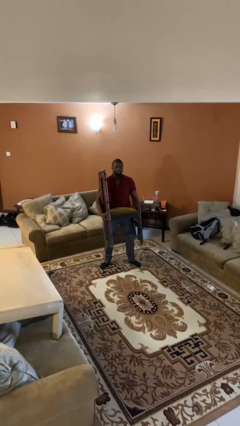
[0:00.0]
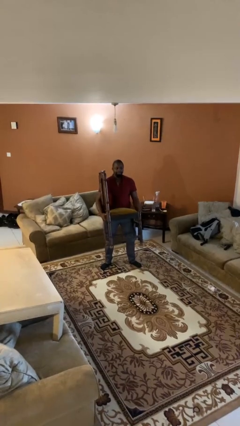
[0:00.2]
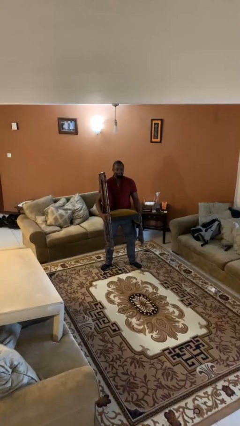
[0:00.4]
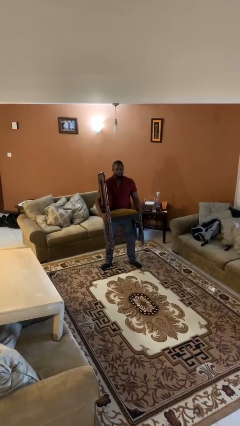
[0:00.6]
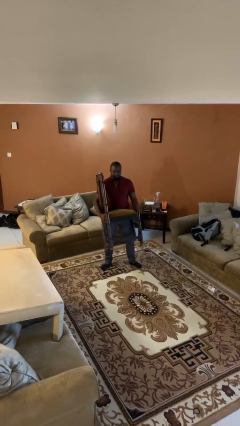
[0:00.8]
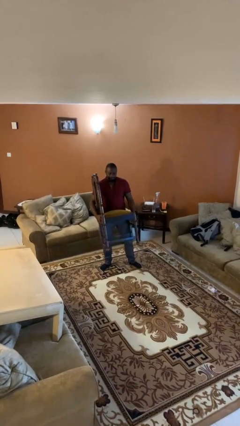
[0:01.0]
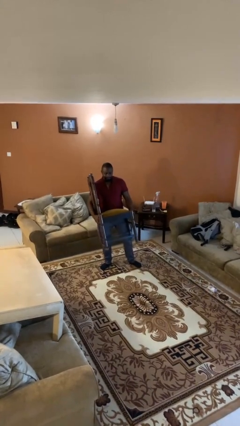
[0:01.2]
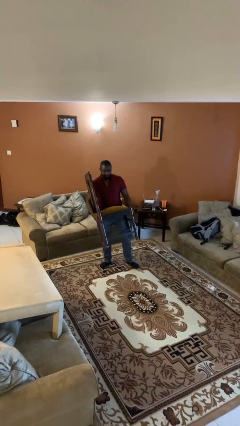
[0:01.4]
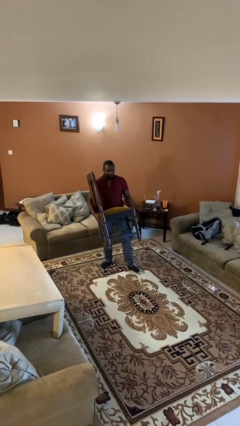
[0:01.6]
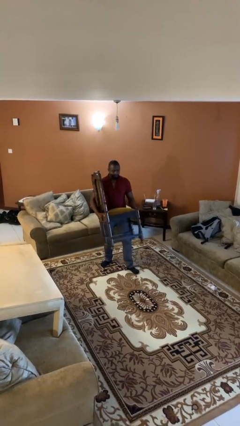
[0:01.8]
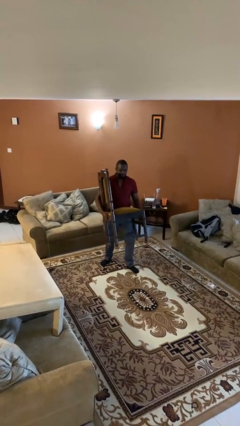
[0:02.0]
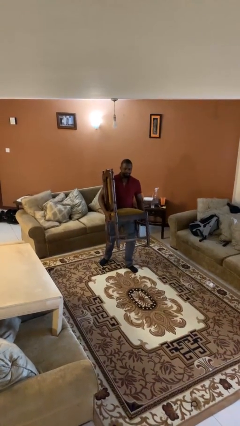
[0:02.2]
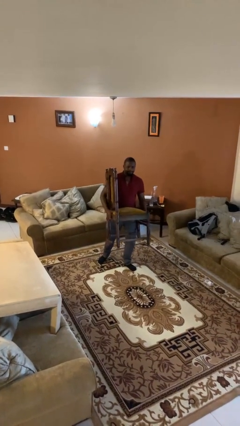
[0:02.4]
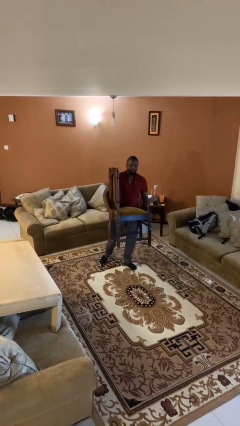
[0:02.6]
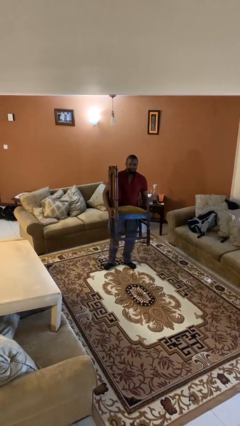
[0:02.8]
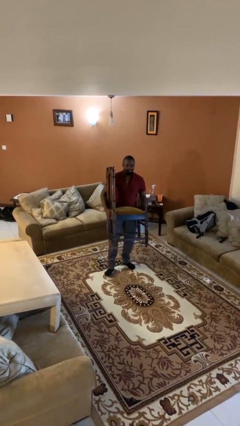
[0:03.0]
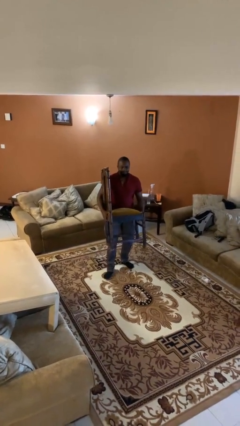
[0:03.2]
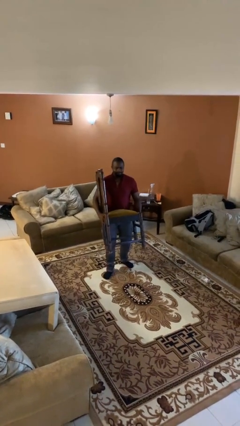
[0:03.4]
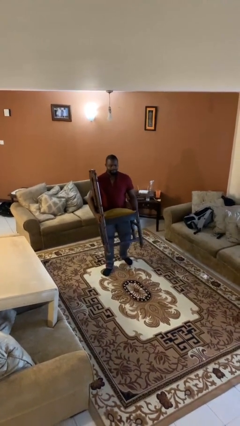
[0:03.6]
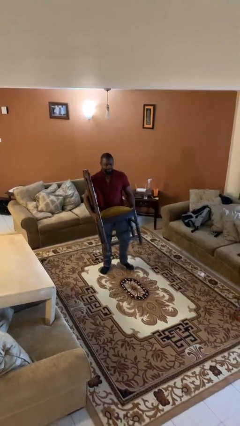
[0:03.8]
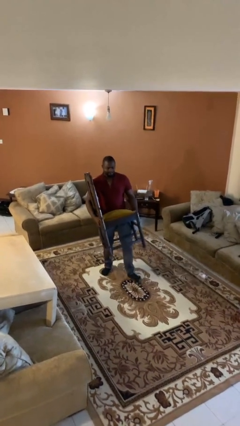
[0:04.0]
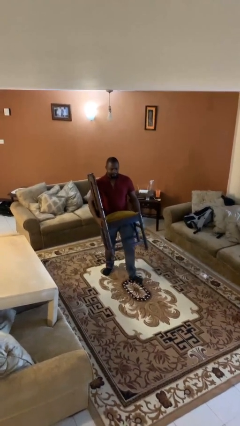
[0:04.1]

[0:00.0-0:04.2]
person carries heavy object

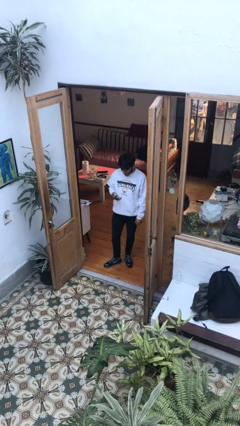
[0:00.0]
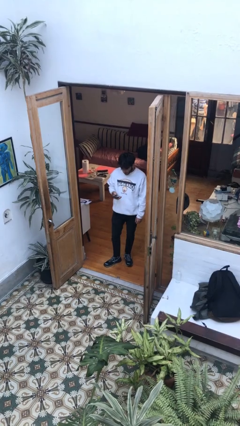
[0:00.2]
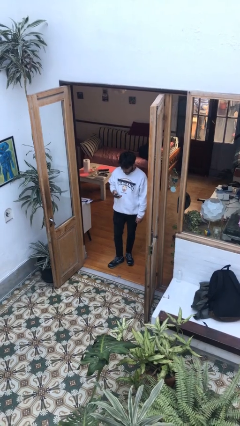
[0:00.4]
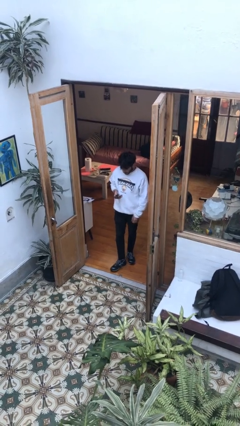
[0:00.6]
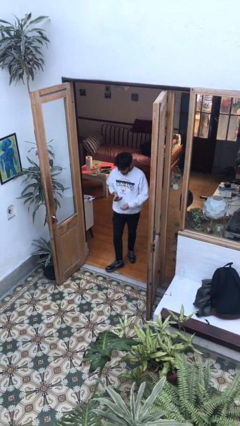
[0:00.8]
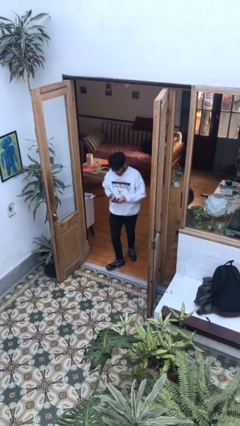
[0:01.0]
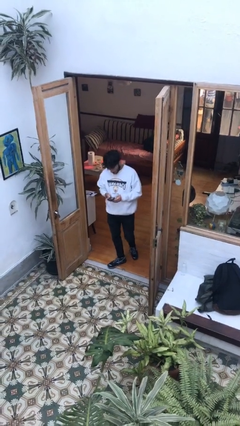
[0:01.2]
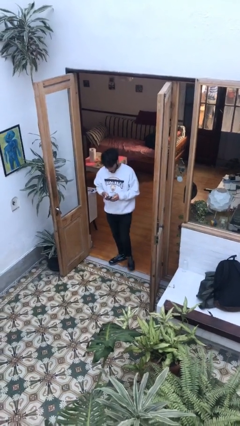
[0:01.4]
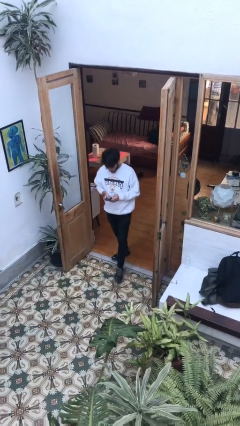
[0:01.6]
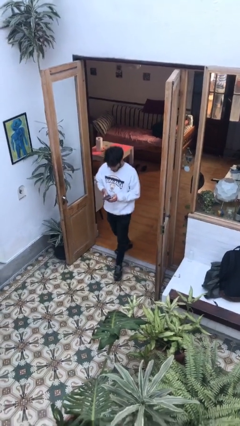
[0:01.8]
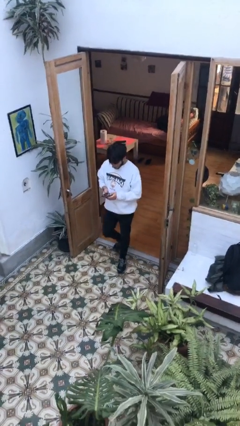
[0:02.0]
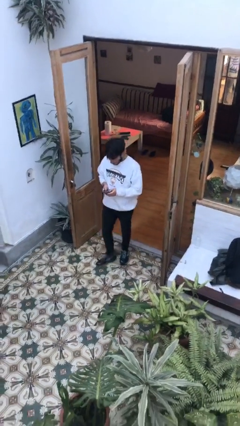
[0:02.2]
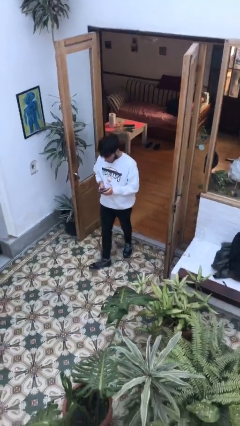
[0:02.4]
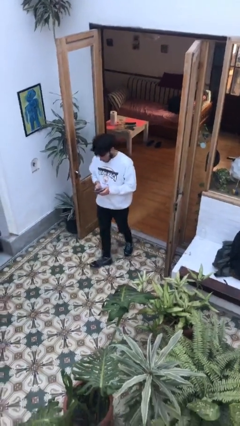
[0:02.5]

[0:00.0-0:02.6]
person enters scene through structure

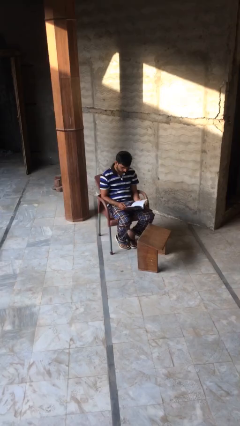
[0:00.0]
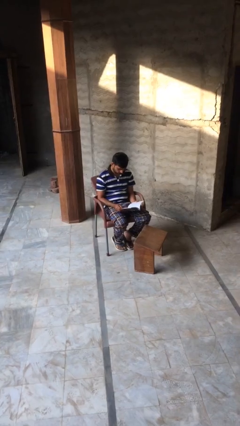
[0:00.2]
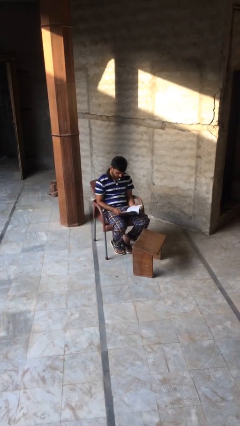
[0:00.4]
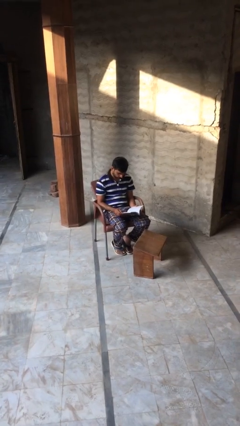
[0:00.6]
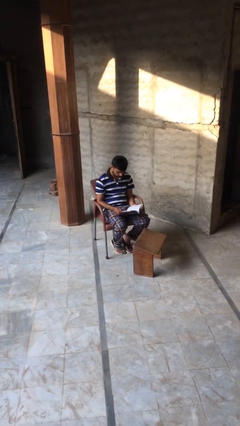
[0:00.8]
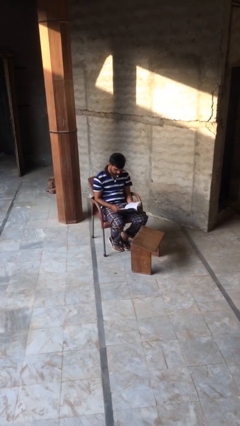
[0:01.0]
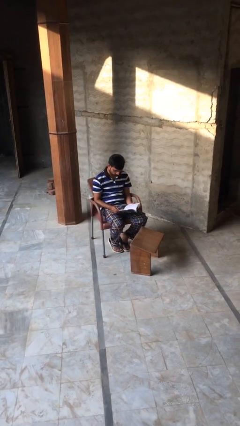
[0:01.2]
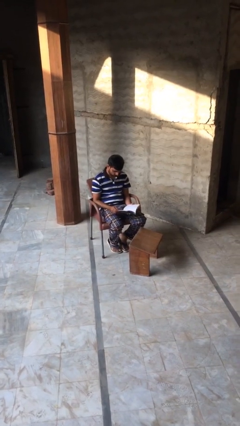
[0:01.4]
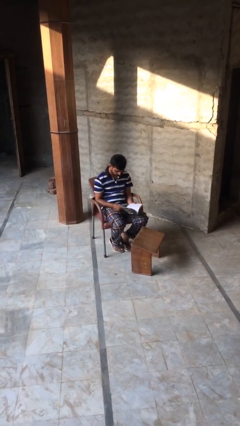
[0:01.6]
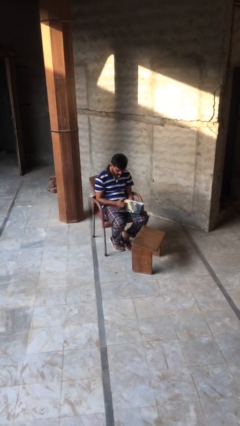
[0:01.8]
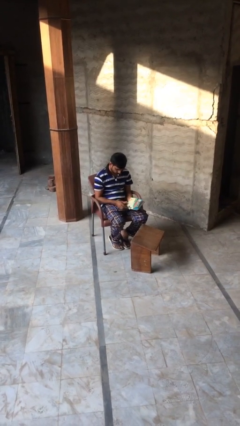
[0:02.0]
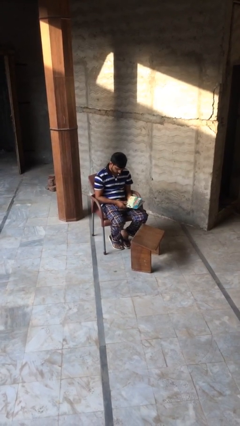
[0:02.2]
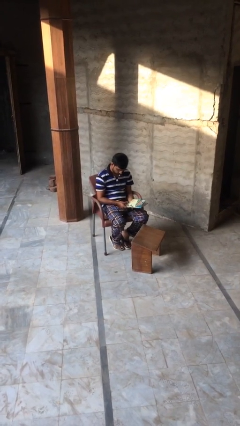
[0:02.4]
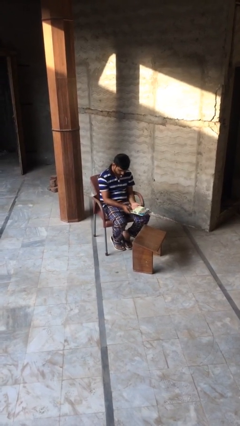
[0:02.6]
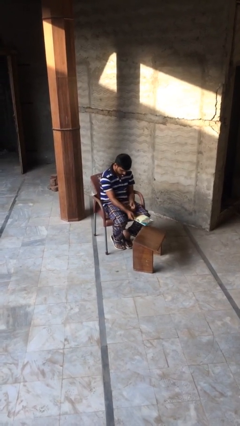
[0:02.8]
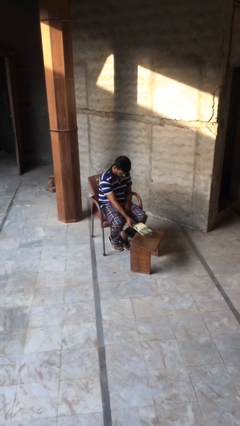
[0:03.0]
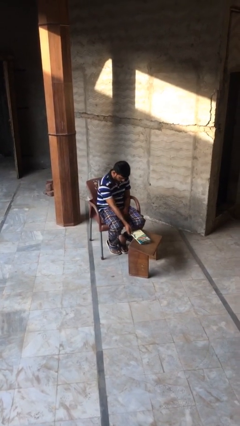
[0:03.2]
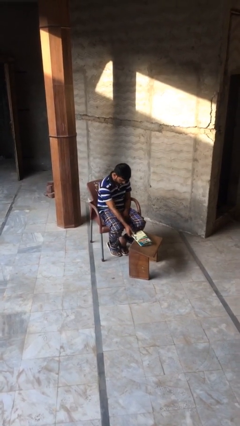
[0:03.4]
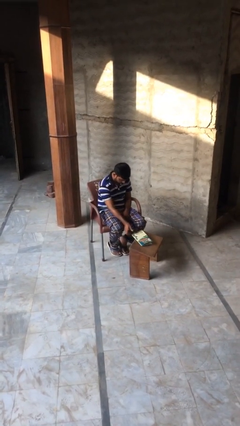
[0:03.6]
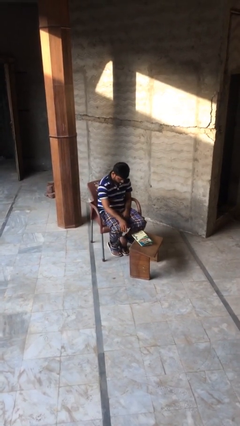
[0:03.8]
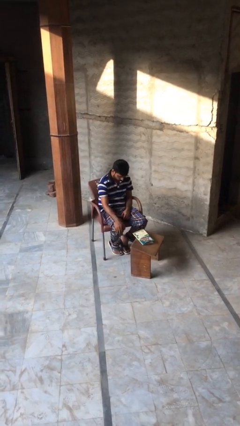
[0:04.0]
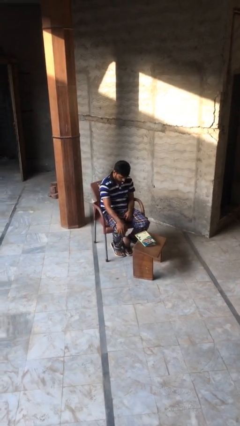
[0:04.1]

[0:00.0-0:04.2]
person puts down object on table

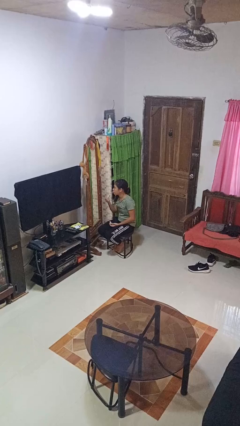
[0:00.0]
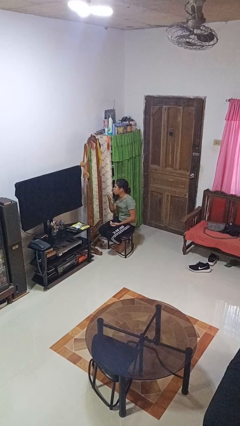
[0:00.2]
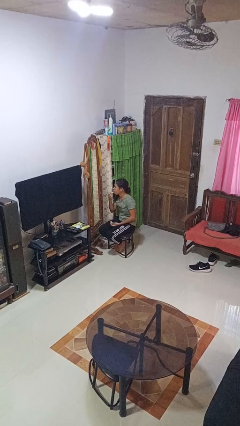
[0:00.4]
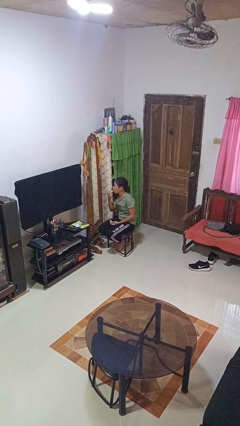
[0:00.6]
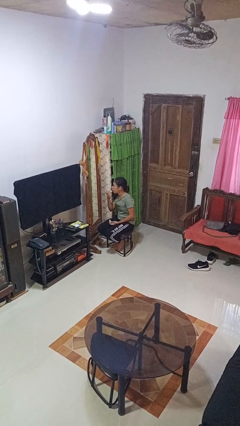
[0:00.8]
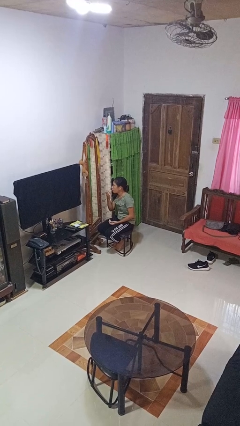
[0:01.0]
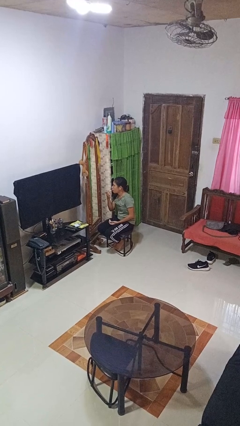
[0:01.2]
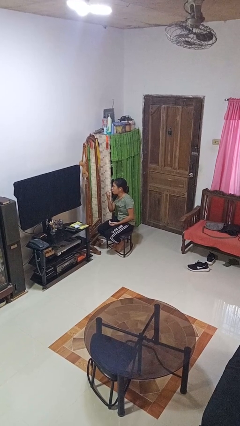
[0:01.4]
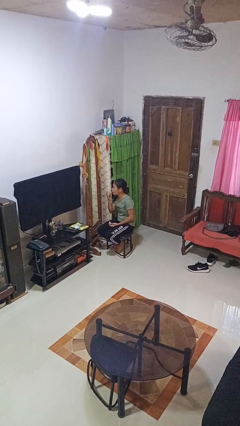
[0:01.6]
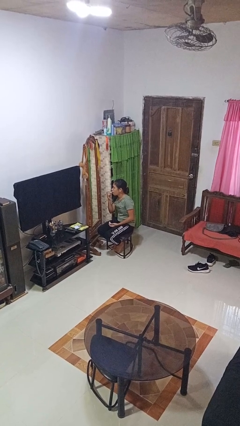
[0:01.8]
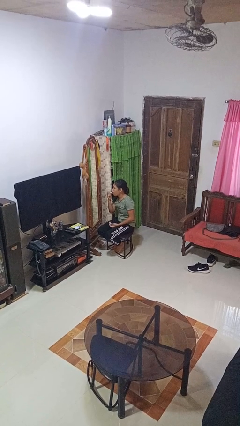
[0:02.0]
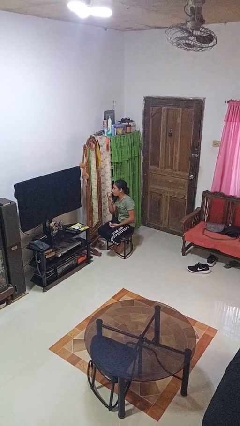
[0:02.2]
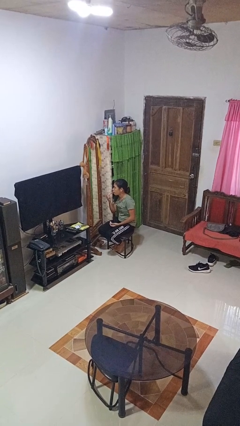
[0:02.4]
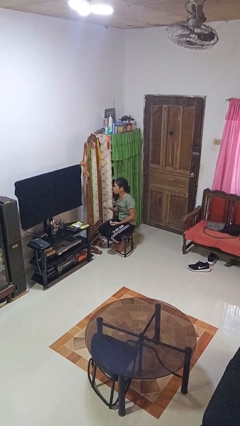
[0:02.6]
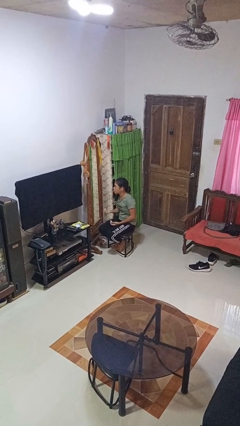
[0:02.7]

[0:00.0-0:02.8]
person applies lip makeup

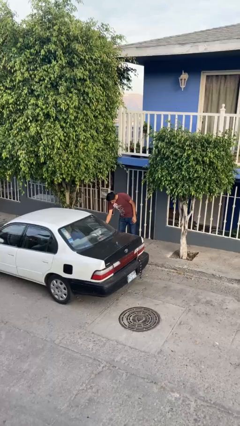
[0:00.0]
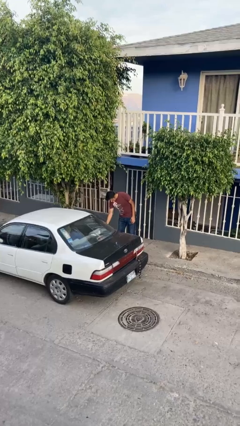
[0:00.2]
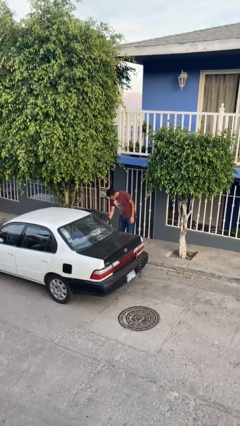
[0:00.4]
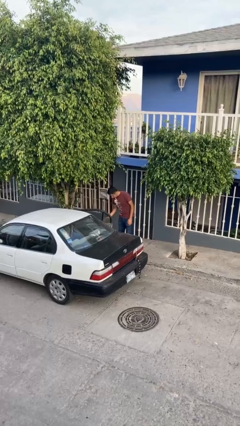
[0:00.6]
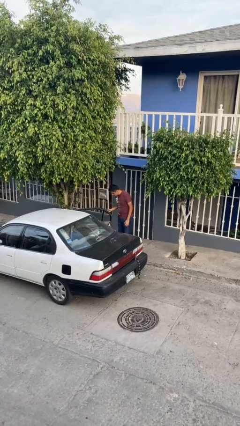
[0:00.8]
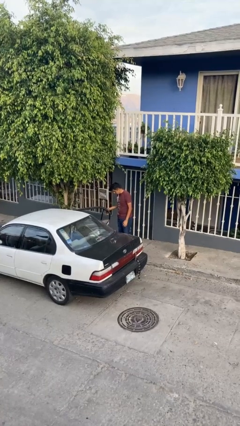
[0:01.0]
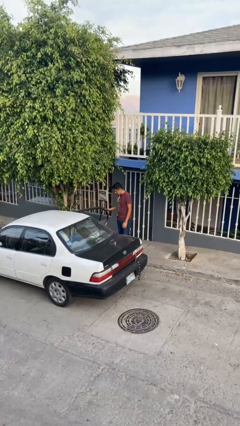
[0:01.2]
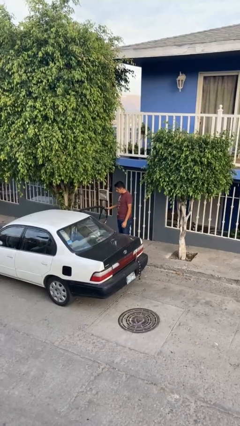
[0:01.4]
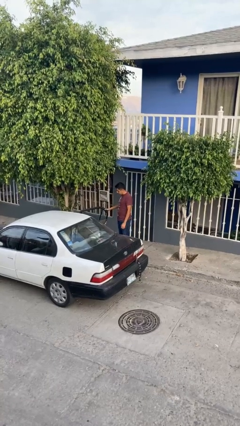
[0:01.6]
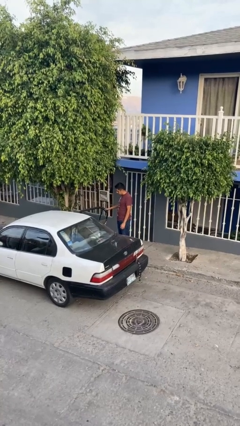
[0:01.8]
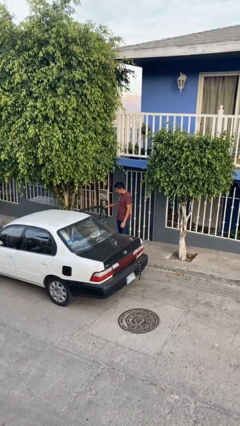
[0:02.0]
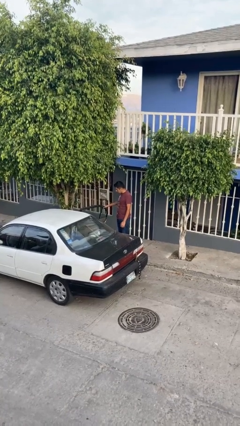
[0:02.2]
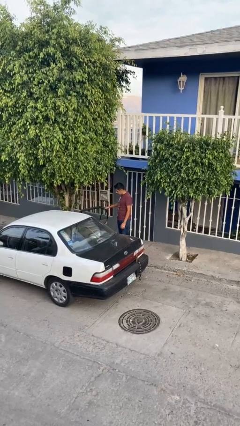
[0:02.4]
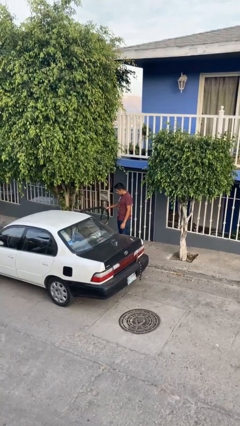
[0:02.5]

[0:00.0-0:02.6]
person opens car door

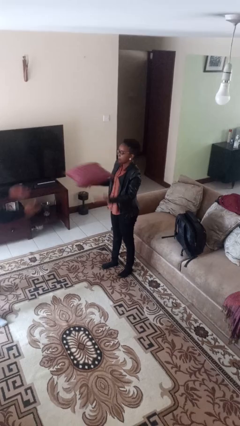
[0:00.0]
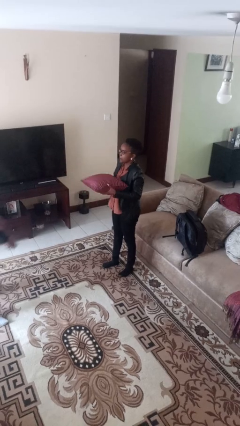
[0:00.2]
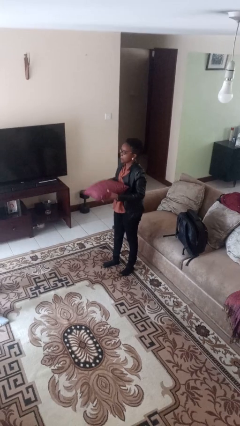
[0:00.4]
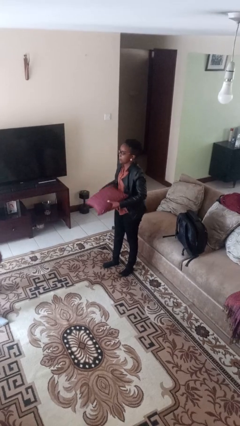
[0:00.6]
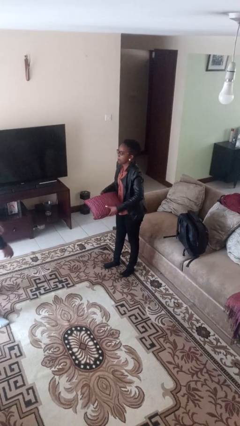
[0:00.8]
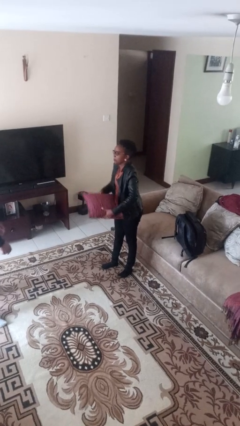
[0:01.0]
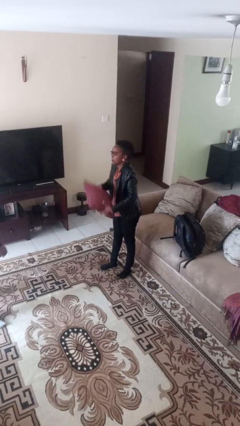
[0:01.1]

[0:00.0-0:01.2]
person catches object from person
